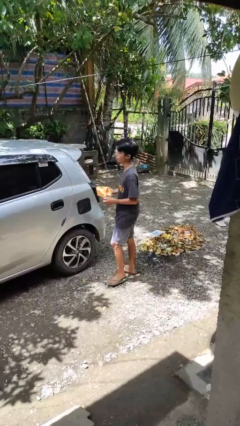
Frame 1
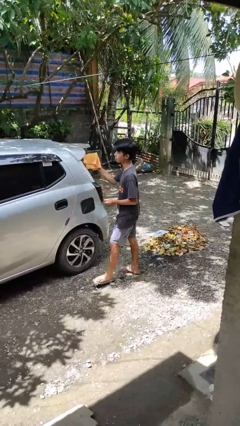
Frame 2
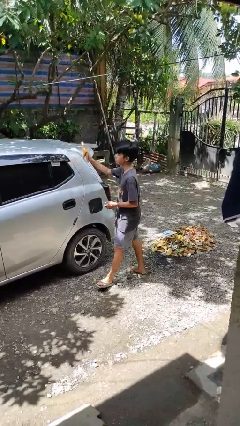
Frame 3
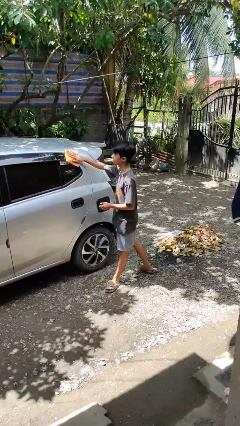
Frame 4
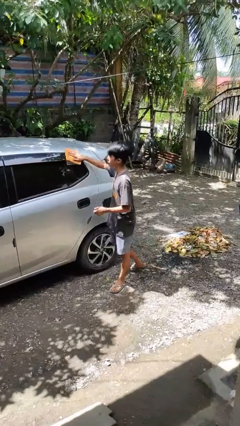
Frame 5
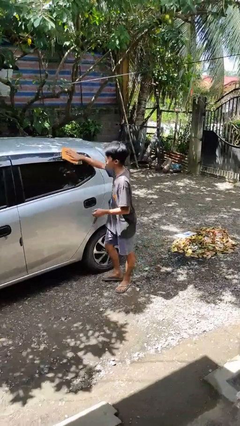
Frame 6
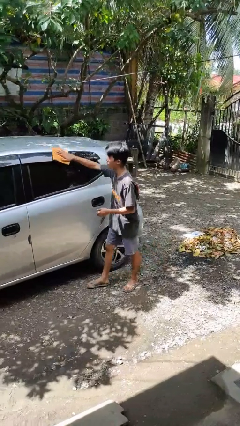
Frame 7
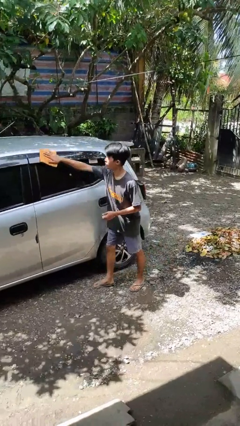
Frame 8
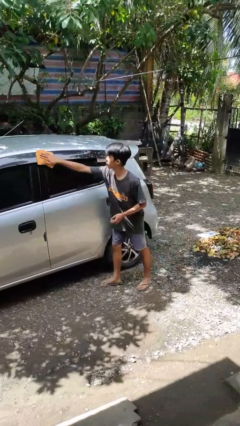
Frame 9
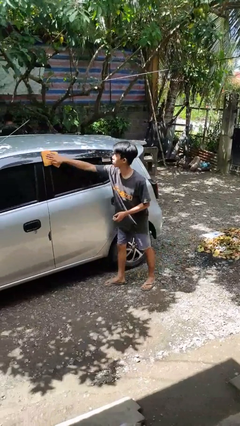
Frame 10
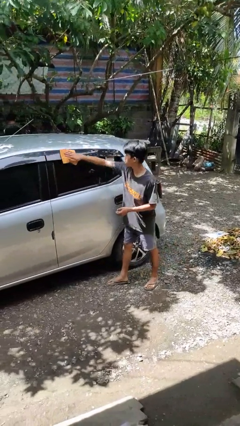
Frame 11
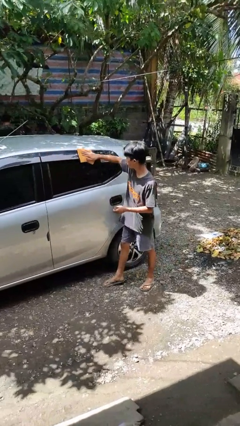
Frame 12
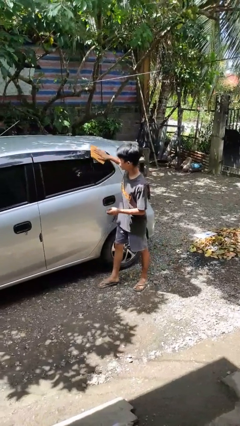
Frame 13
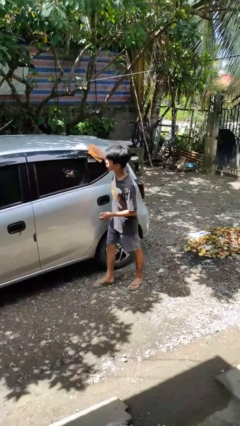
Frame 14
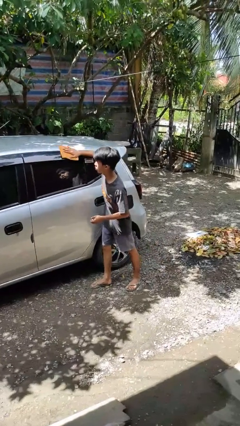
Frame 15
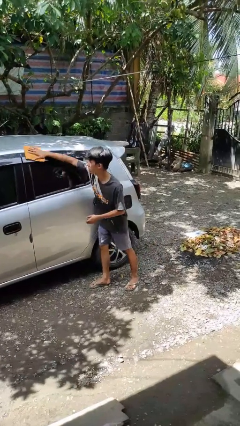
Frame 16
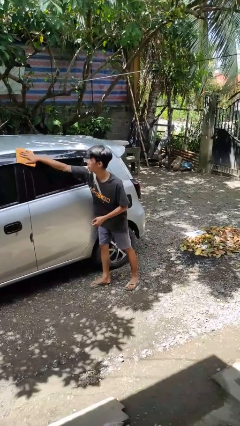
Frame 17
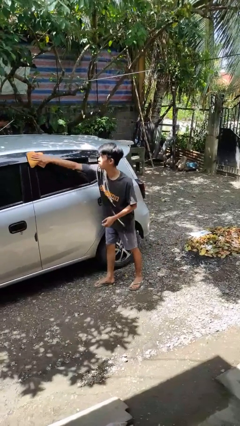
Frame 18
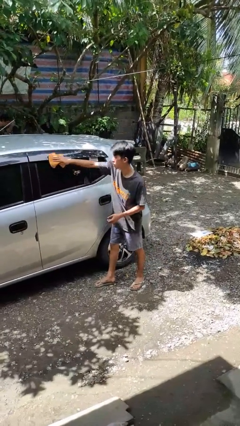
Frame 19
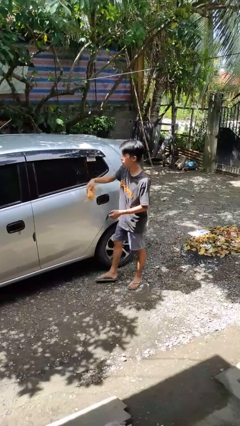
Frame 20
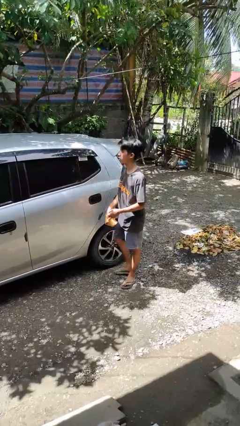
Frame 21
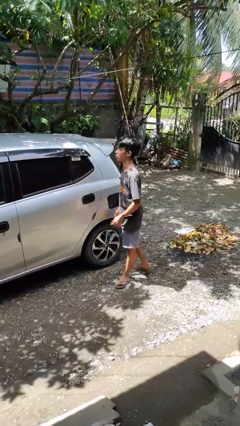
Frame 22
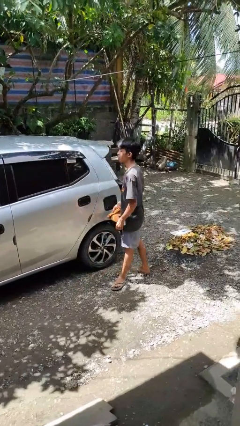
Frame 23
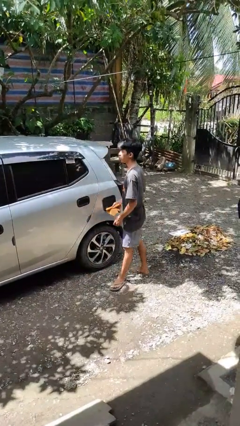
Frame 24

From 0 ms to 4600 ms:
person polishes car with rag

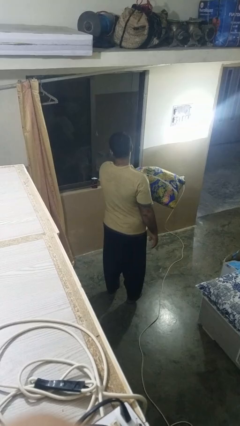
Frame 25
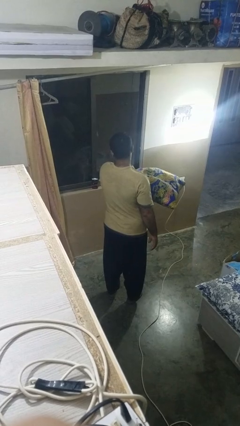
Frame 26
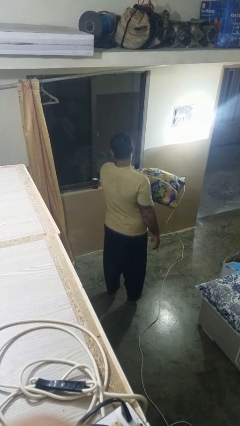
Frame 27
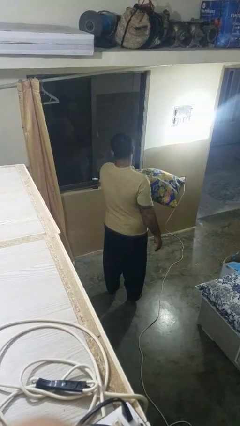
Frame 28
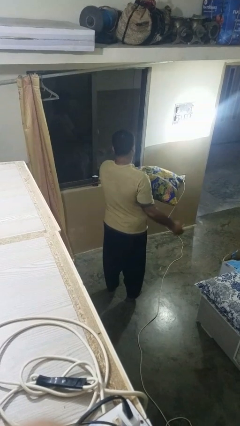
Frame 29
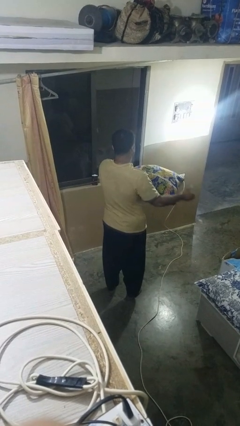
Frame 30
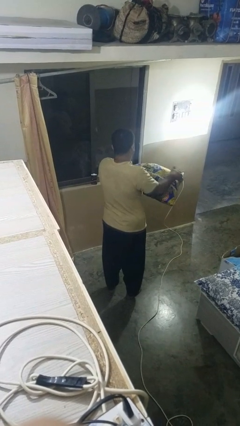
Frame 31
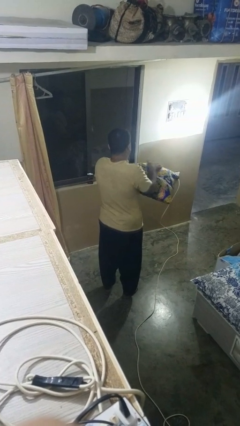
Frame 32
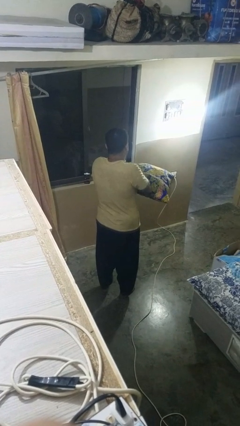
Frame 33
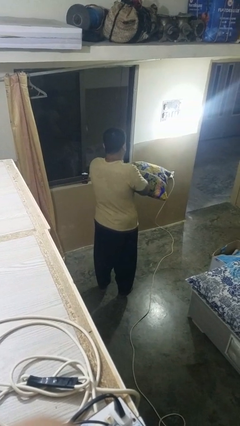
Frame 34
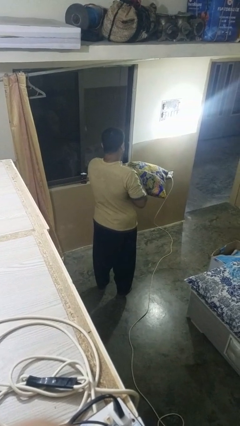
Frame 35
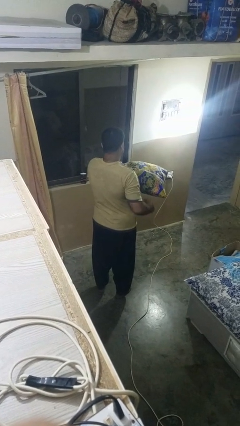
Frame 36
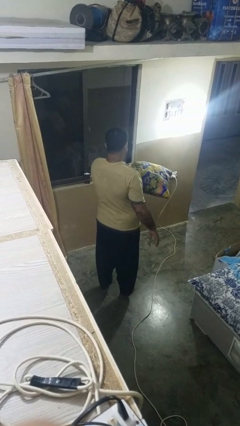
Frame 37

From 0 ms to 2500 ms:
person waves hand over object

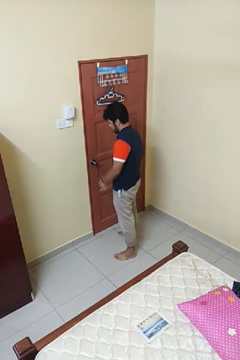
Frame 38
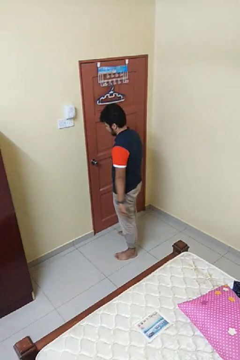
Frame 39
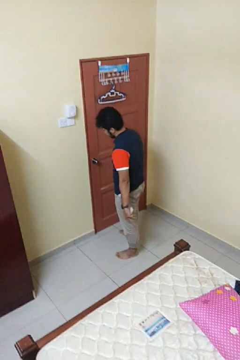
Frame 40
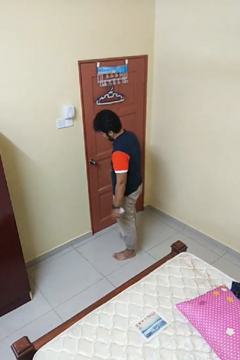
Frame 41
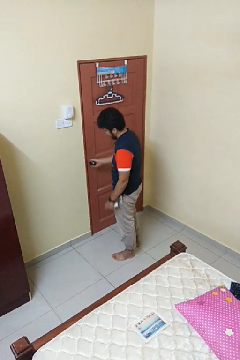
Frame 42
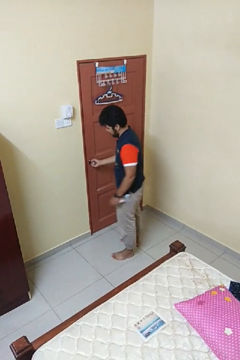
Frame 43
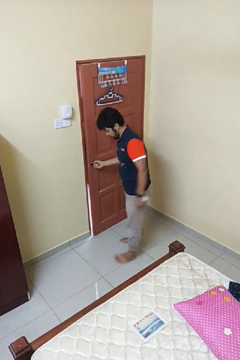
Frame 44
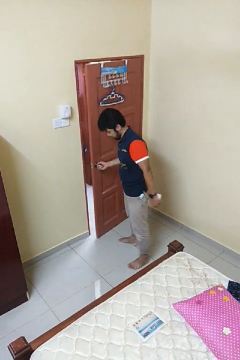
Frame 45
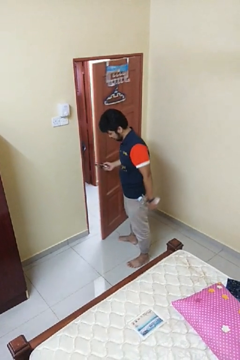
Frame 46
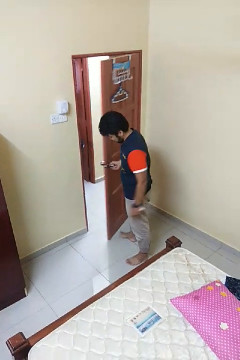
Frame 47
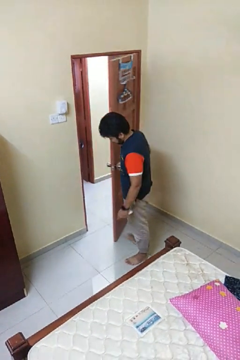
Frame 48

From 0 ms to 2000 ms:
person opens facility door

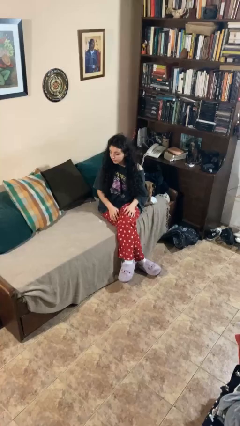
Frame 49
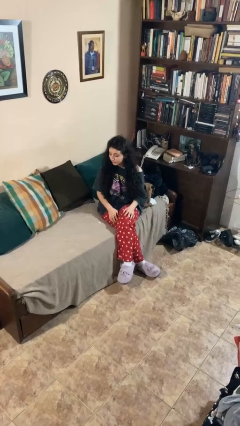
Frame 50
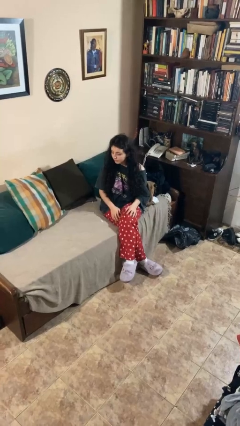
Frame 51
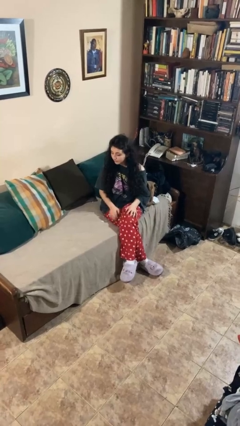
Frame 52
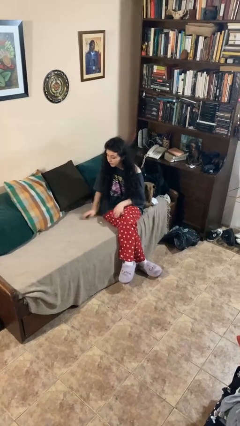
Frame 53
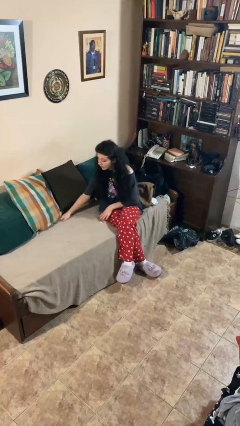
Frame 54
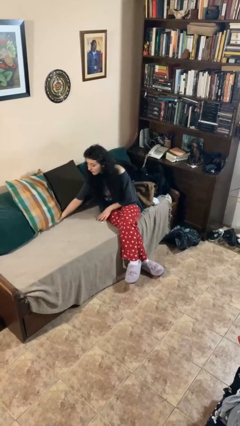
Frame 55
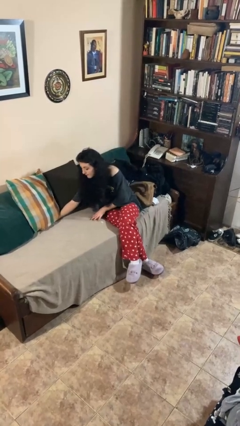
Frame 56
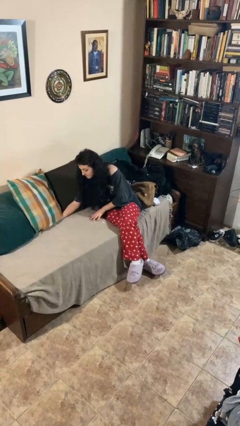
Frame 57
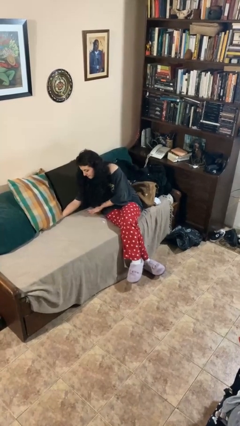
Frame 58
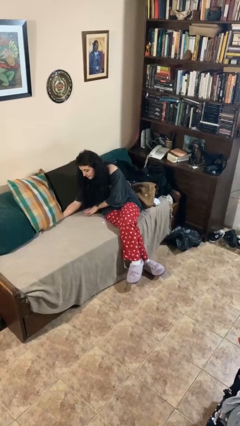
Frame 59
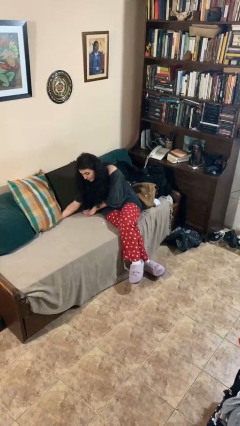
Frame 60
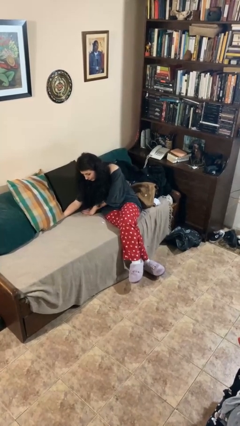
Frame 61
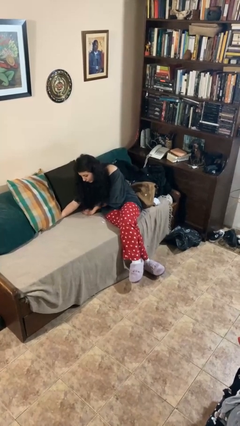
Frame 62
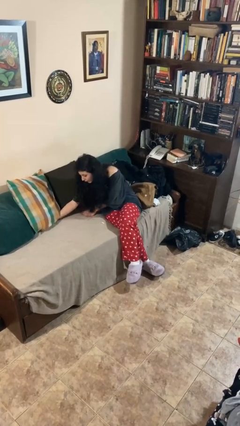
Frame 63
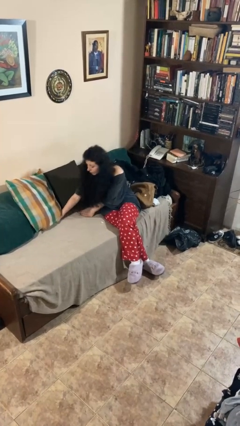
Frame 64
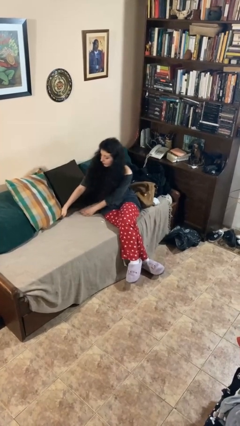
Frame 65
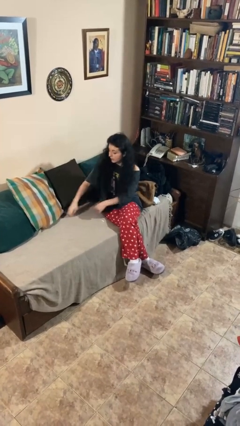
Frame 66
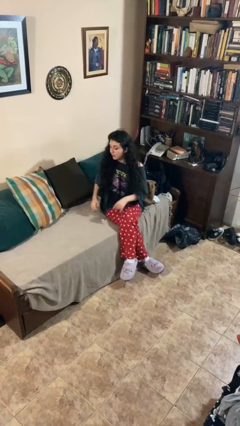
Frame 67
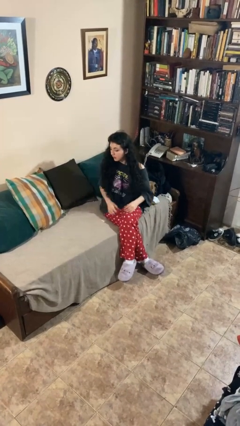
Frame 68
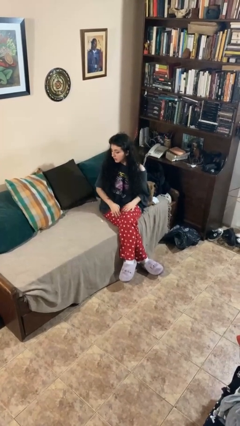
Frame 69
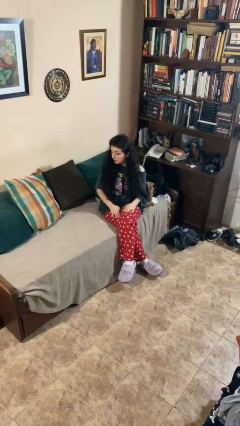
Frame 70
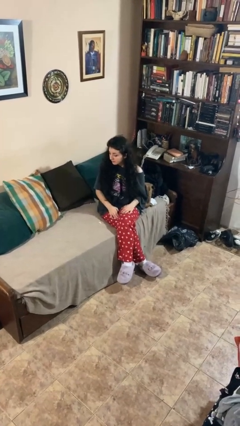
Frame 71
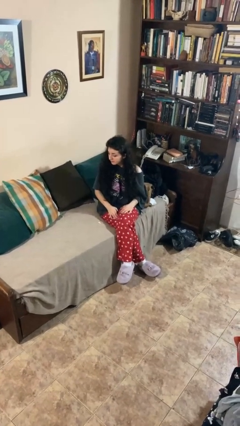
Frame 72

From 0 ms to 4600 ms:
person searches in couch

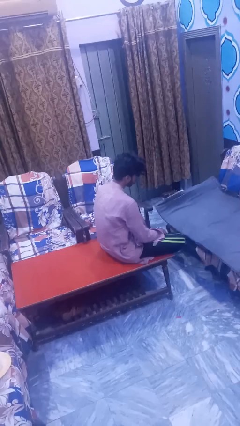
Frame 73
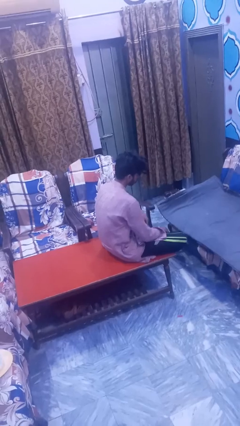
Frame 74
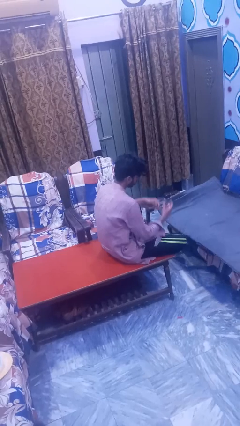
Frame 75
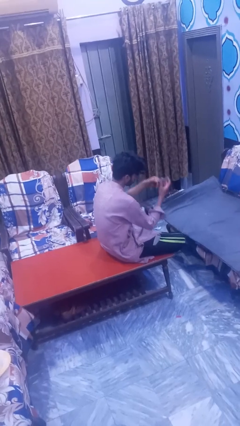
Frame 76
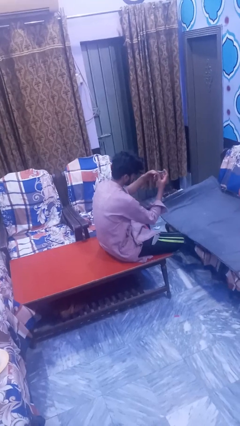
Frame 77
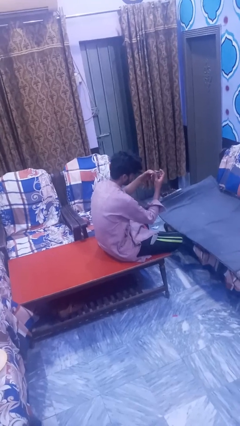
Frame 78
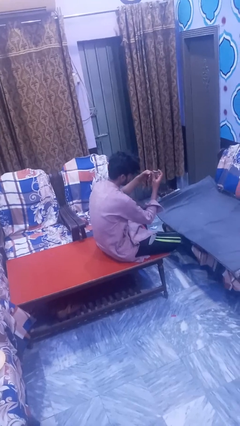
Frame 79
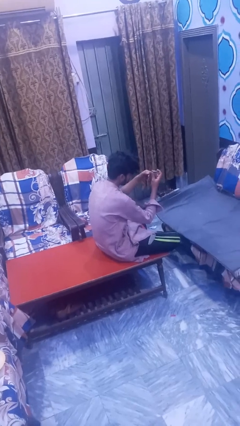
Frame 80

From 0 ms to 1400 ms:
person clips fingernails

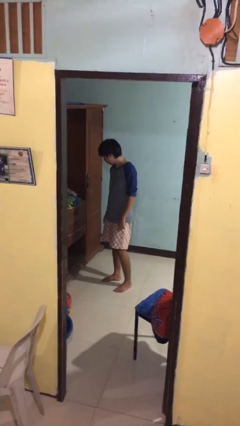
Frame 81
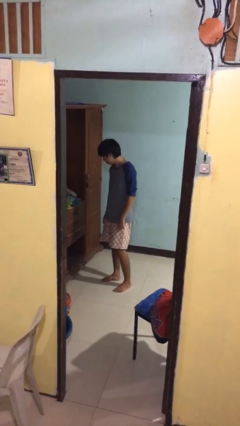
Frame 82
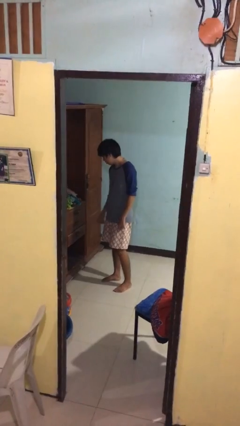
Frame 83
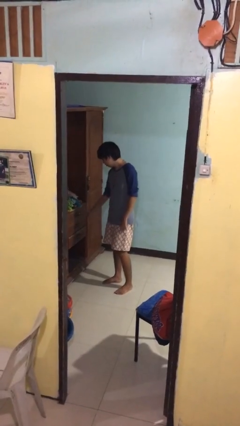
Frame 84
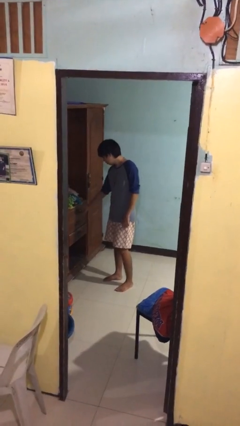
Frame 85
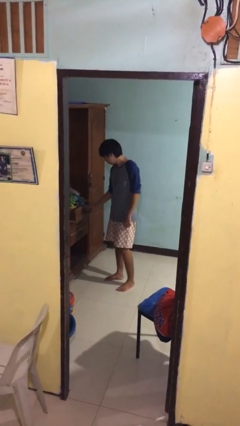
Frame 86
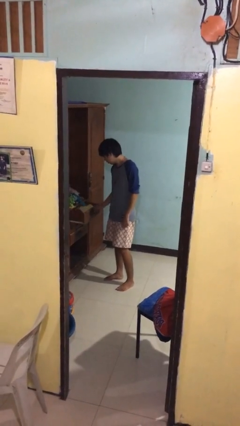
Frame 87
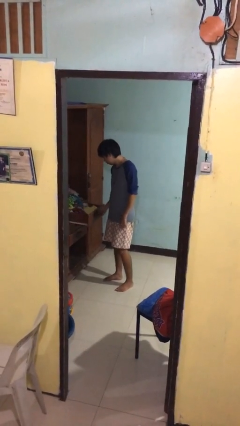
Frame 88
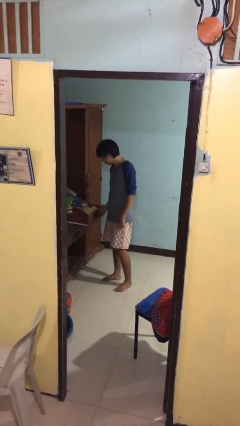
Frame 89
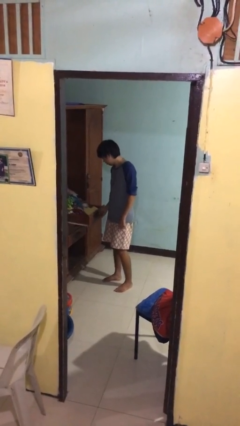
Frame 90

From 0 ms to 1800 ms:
person opens dresser drawer

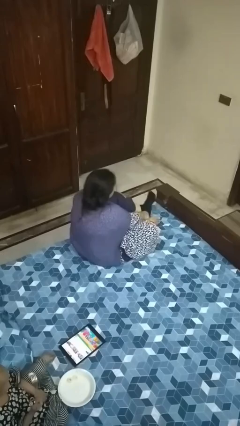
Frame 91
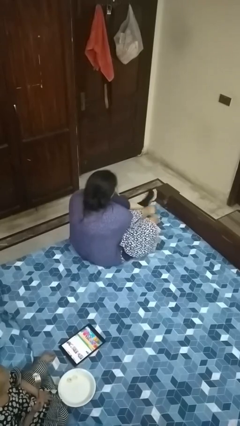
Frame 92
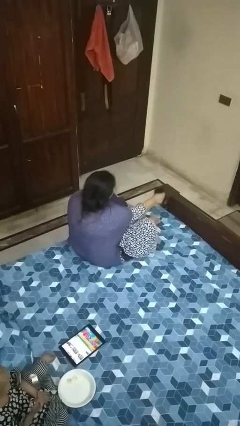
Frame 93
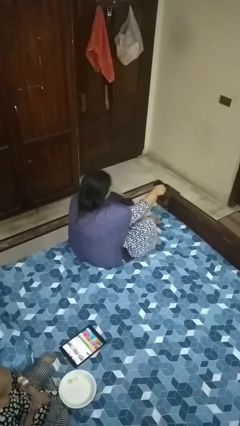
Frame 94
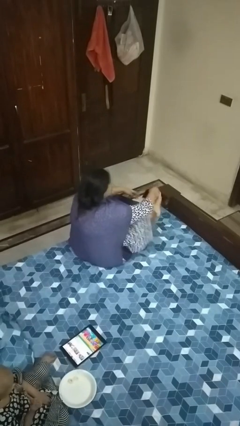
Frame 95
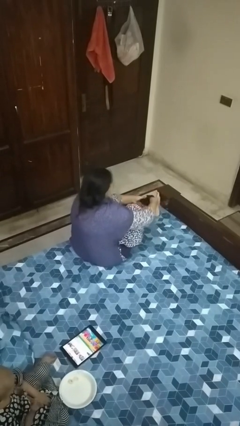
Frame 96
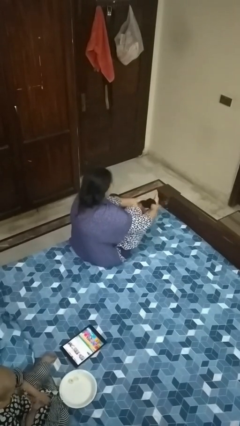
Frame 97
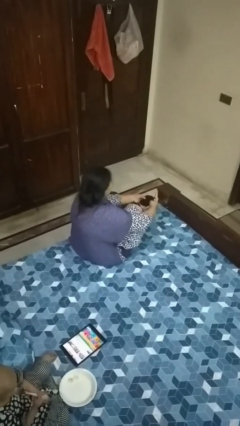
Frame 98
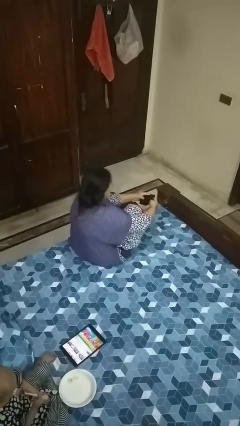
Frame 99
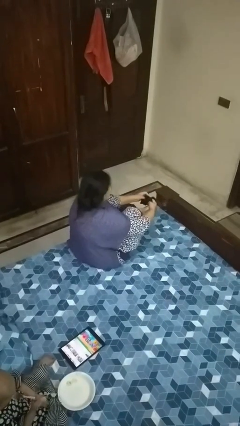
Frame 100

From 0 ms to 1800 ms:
person takes off socks
